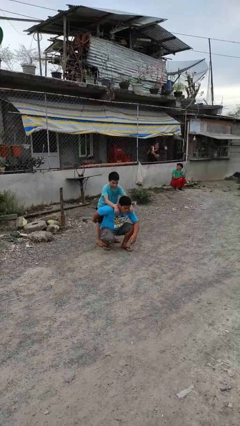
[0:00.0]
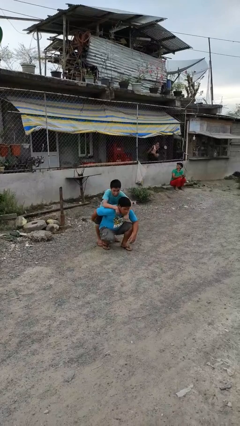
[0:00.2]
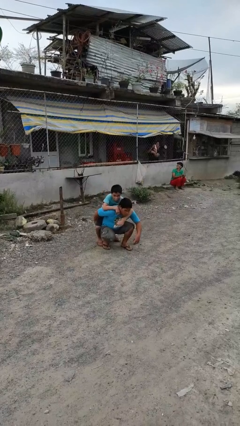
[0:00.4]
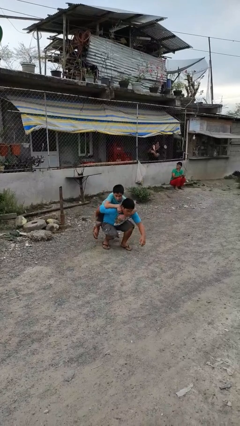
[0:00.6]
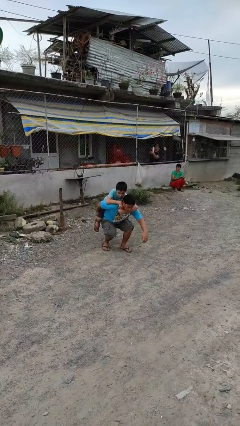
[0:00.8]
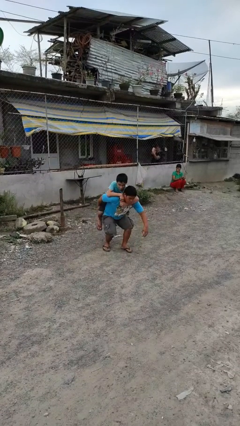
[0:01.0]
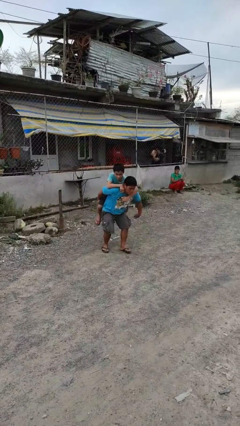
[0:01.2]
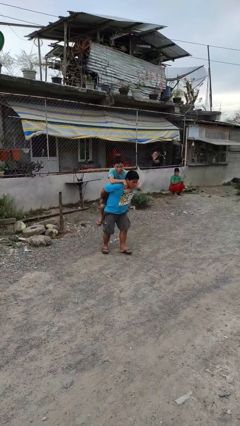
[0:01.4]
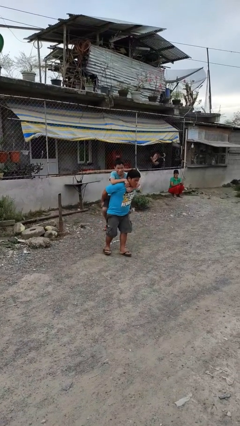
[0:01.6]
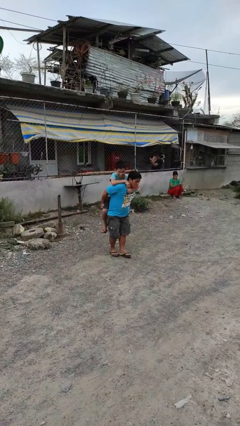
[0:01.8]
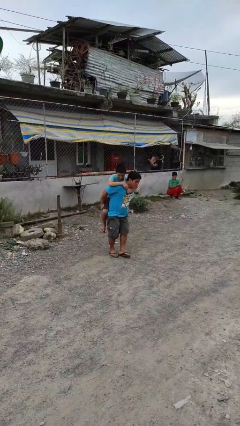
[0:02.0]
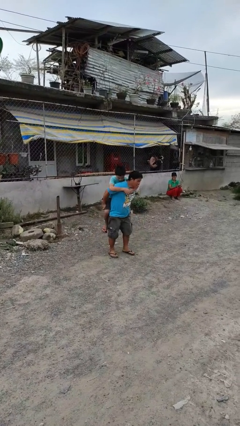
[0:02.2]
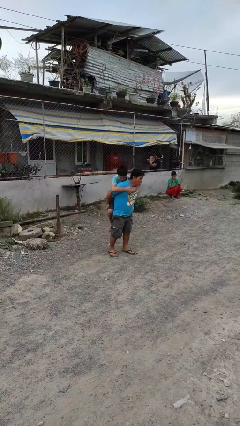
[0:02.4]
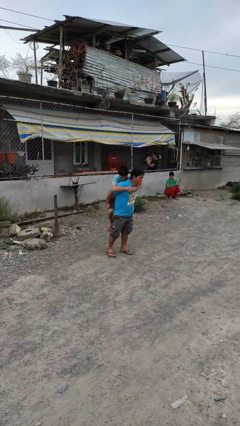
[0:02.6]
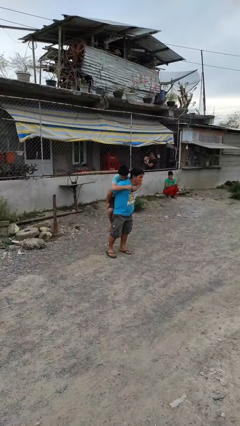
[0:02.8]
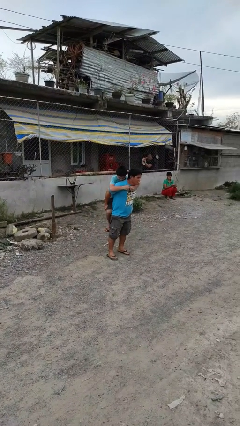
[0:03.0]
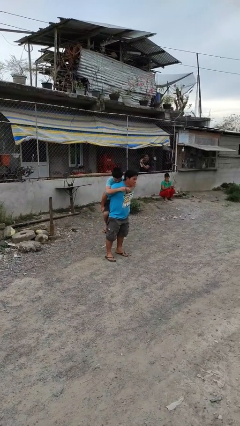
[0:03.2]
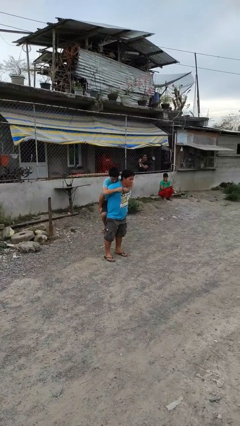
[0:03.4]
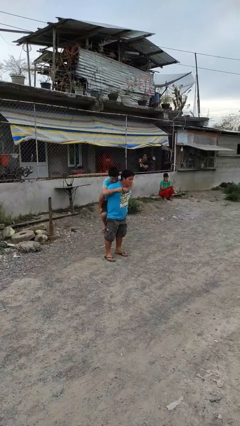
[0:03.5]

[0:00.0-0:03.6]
person carries person over shoulder

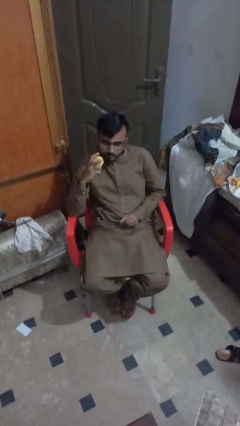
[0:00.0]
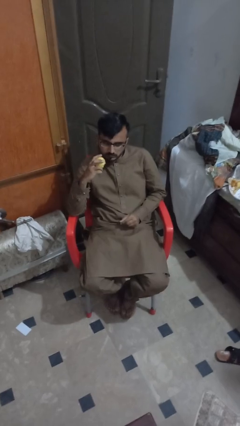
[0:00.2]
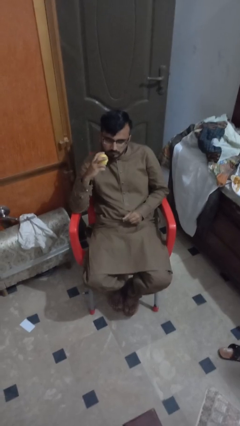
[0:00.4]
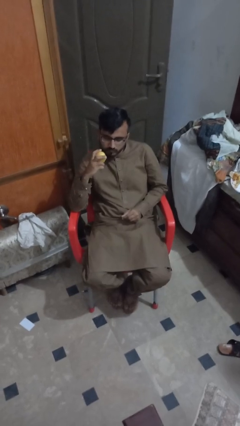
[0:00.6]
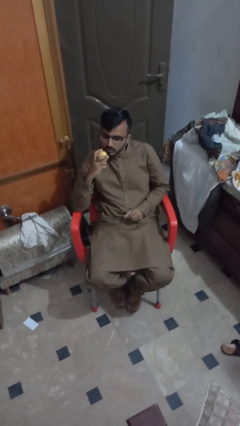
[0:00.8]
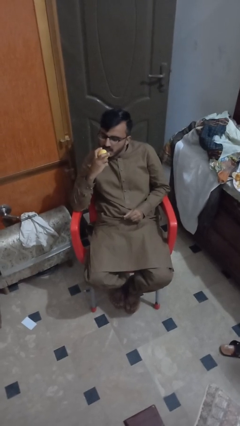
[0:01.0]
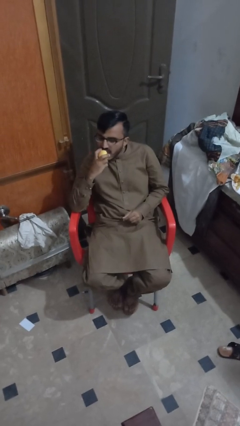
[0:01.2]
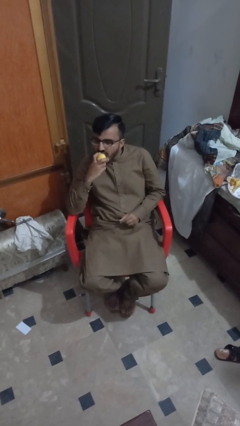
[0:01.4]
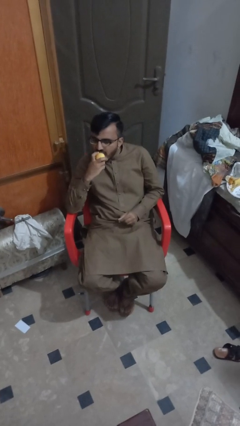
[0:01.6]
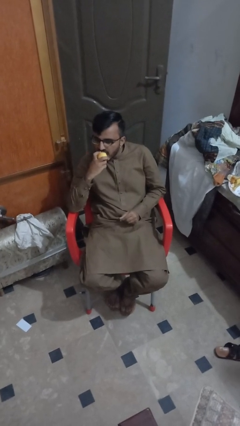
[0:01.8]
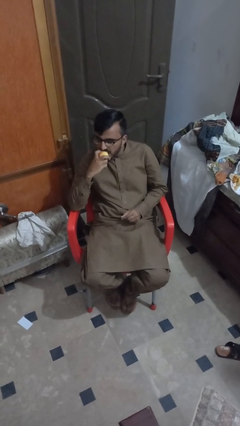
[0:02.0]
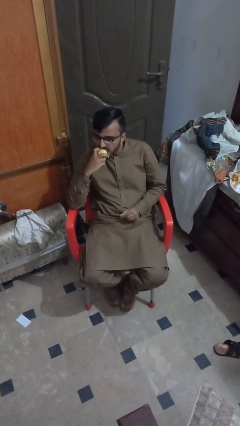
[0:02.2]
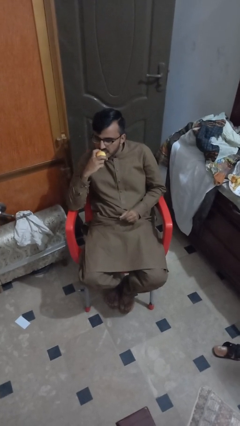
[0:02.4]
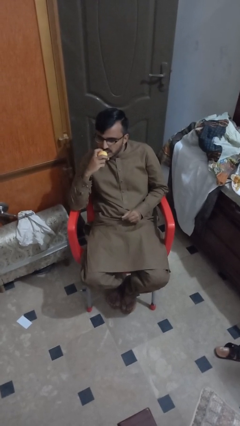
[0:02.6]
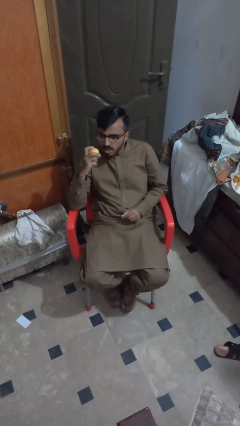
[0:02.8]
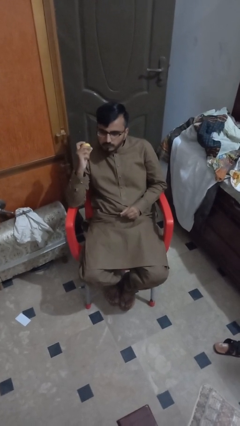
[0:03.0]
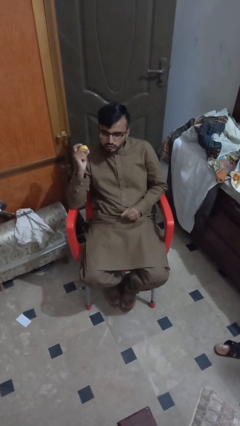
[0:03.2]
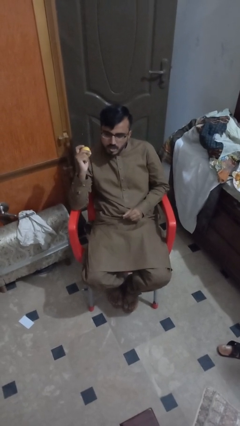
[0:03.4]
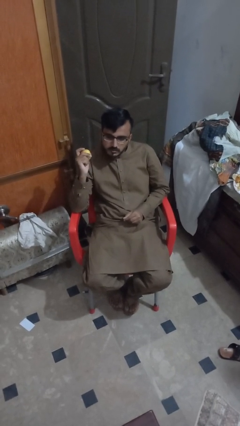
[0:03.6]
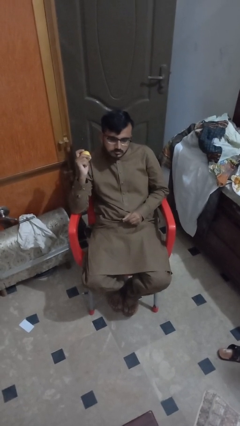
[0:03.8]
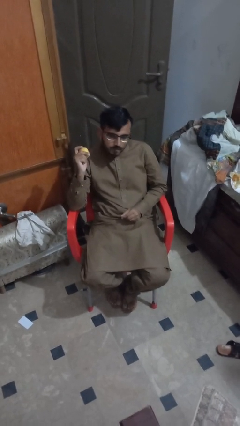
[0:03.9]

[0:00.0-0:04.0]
person eats apple

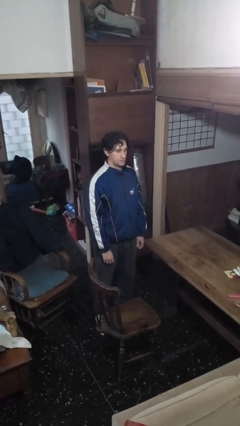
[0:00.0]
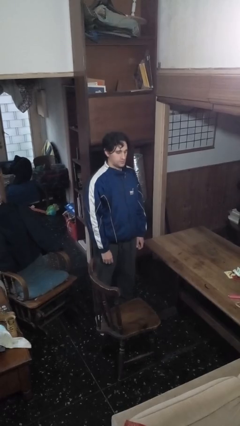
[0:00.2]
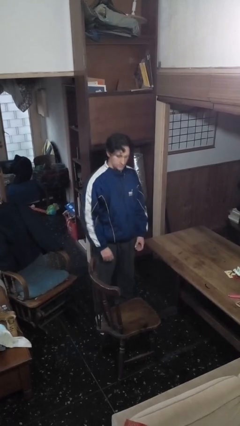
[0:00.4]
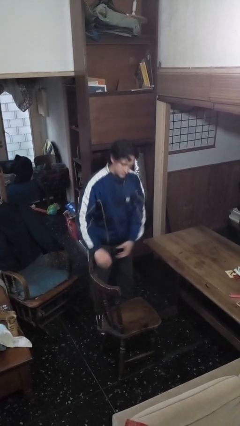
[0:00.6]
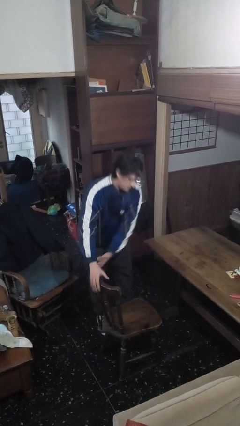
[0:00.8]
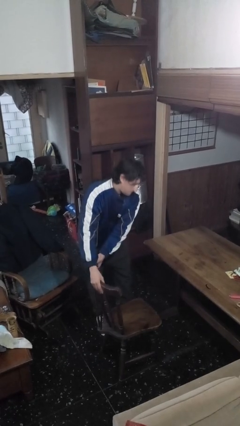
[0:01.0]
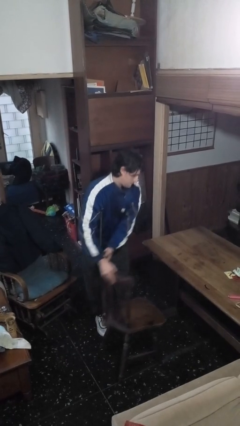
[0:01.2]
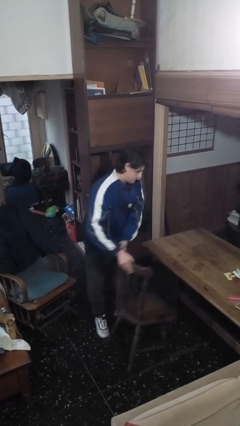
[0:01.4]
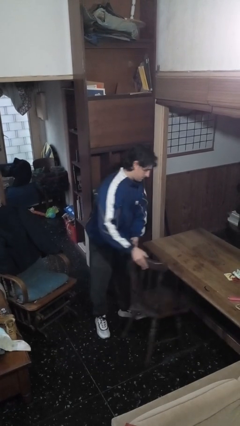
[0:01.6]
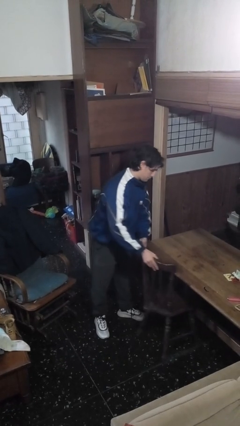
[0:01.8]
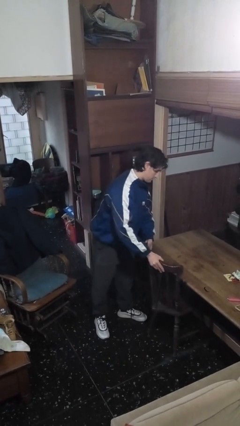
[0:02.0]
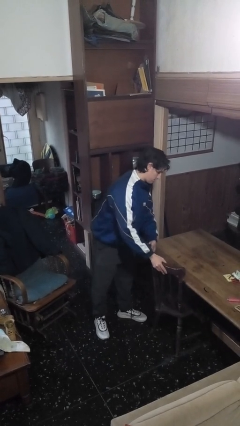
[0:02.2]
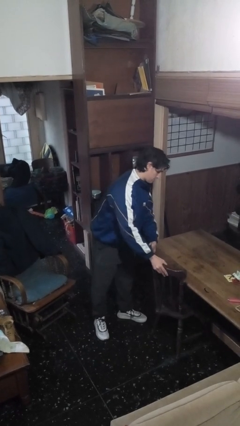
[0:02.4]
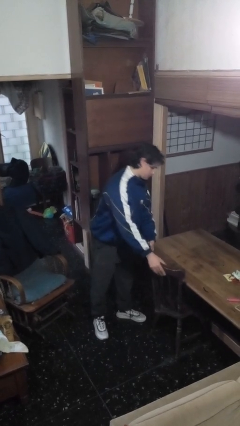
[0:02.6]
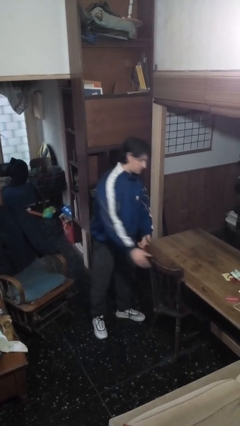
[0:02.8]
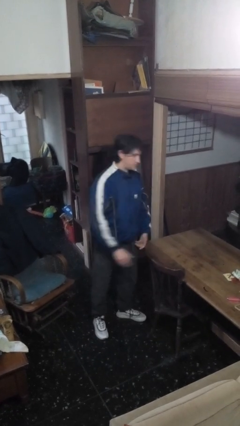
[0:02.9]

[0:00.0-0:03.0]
person pushes in chair

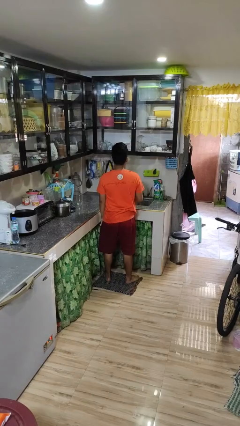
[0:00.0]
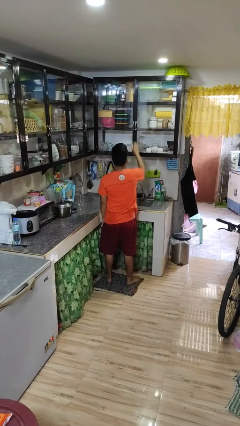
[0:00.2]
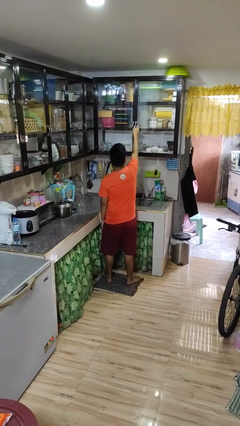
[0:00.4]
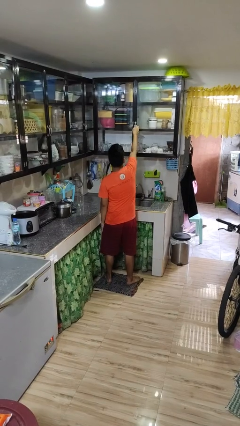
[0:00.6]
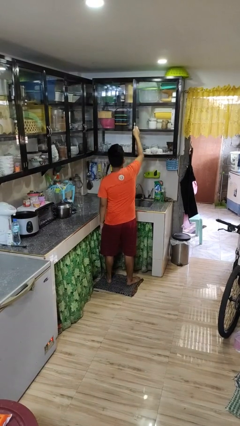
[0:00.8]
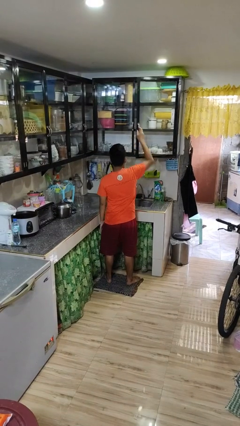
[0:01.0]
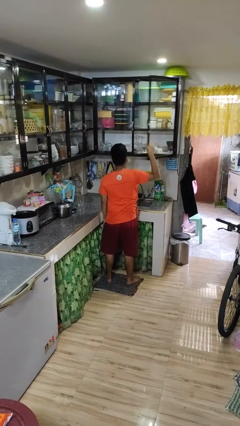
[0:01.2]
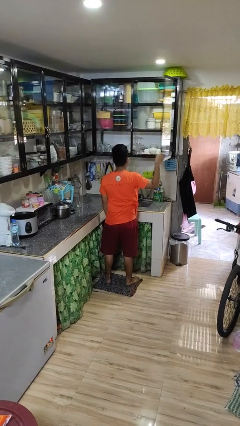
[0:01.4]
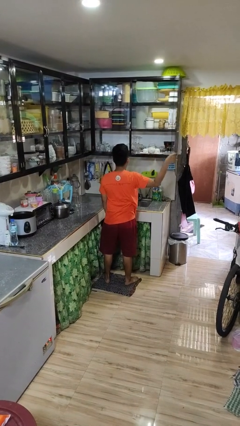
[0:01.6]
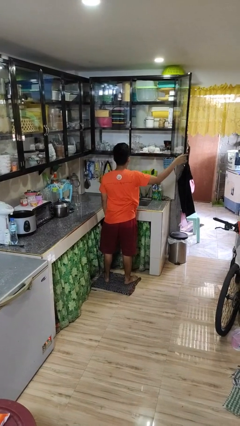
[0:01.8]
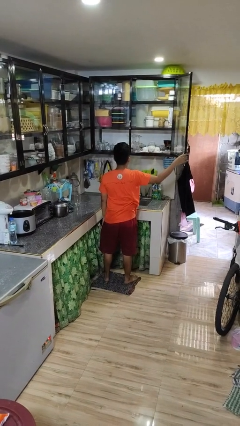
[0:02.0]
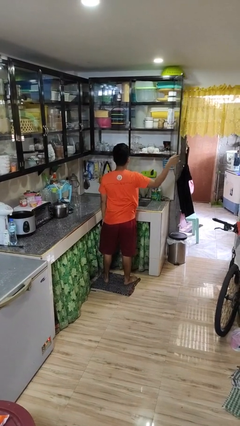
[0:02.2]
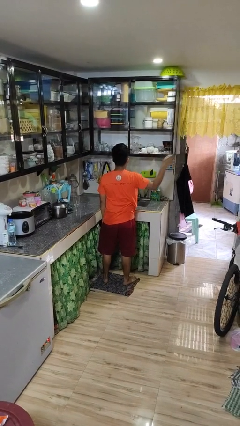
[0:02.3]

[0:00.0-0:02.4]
person opens cabinet

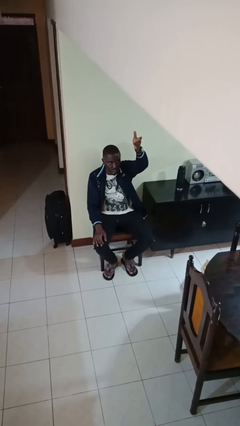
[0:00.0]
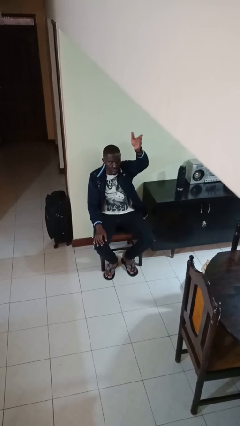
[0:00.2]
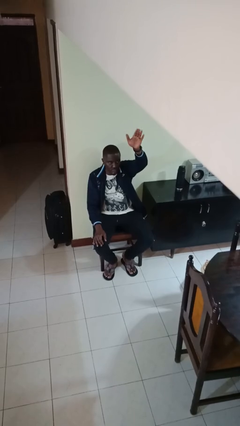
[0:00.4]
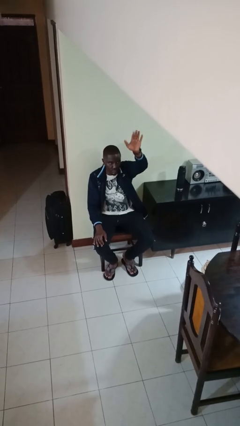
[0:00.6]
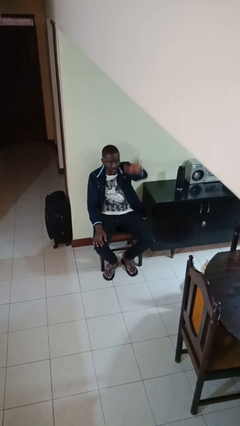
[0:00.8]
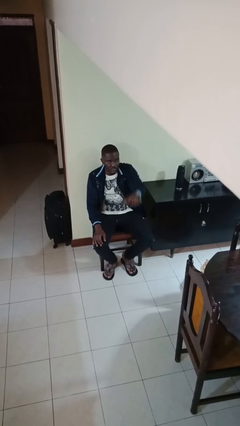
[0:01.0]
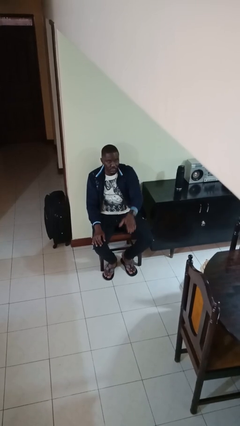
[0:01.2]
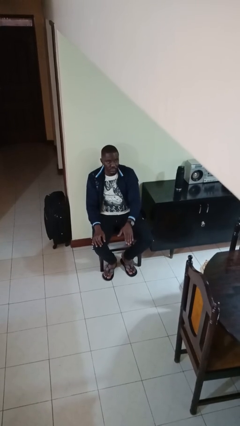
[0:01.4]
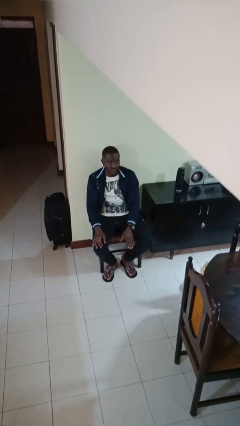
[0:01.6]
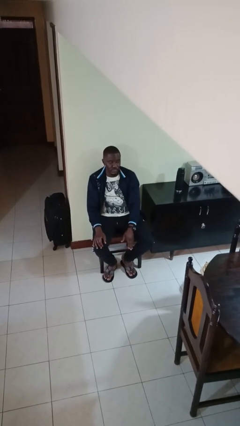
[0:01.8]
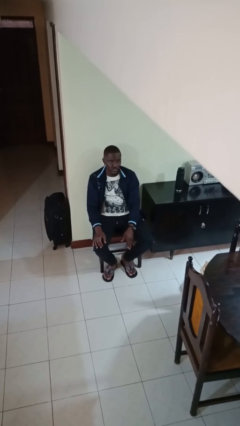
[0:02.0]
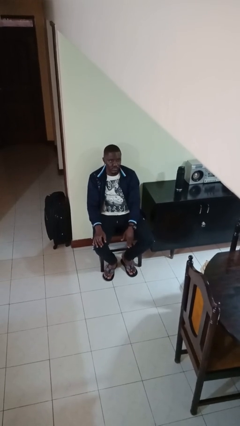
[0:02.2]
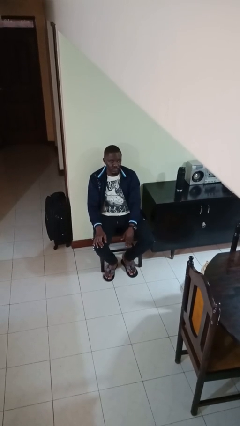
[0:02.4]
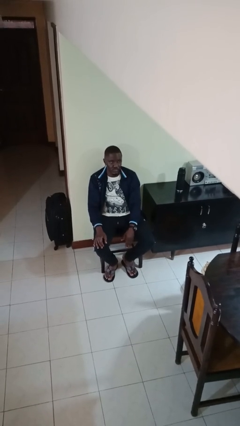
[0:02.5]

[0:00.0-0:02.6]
person gestures swipe down

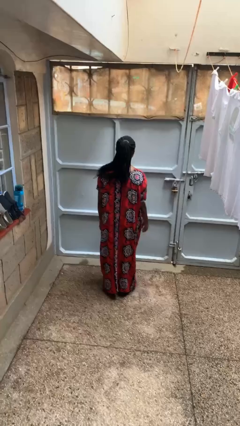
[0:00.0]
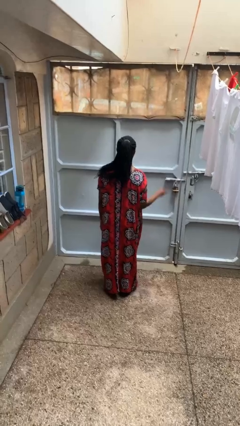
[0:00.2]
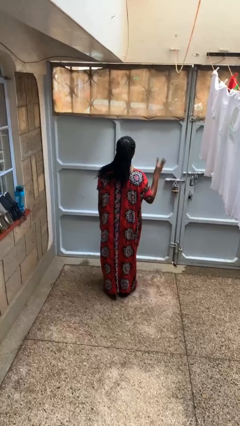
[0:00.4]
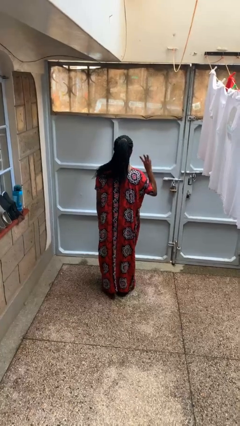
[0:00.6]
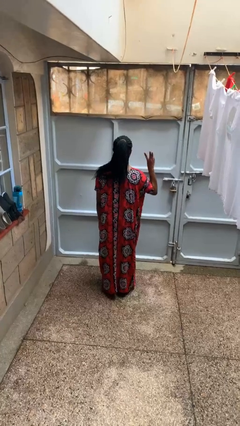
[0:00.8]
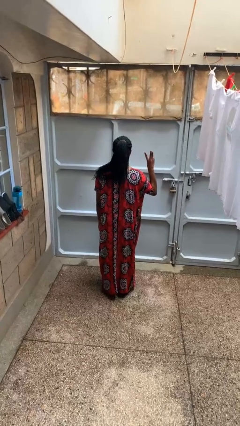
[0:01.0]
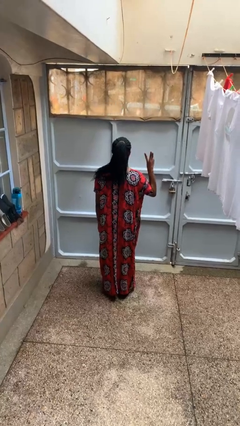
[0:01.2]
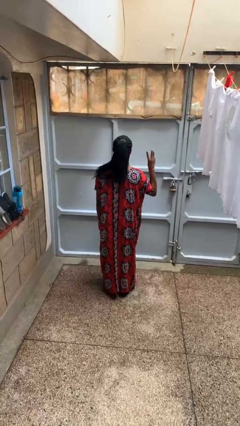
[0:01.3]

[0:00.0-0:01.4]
person gestures number three

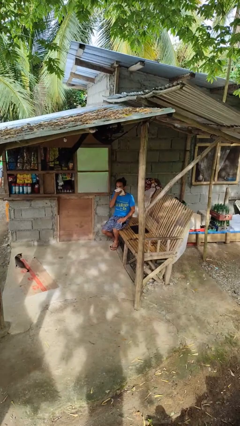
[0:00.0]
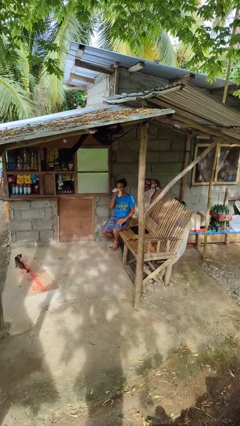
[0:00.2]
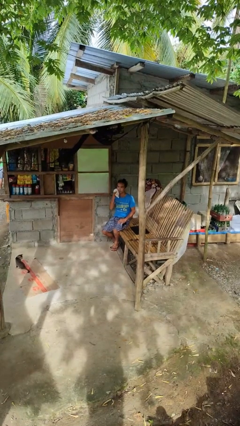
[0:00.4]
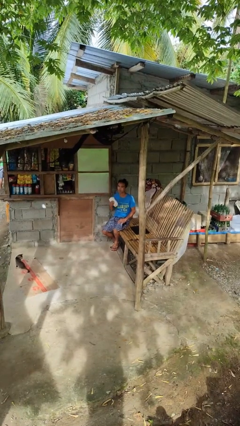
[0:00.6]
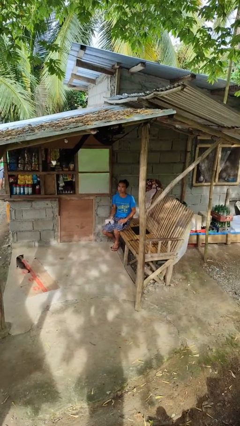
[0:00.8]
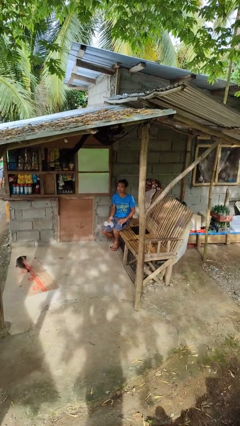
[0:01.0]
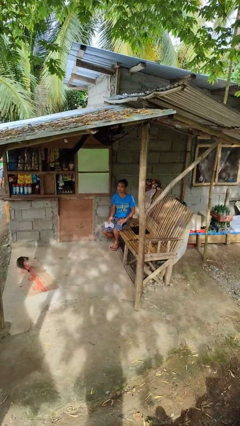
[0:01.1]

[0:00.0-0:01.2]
person wipes mouth with napkin
